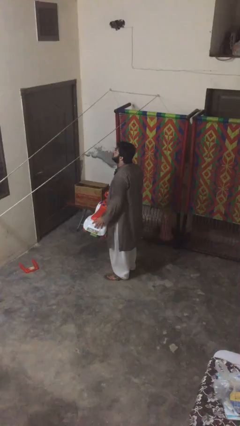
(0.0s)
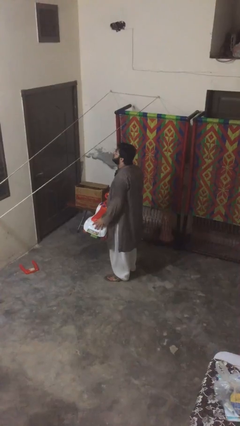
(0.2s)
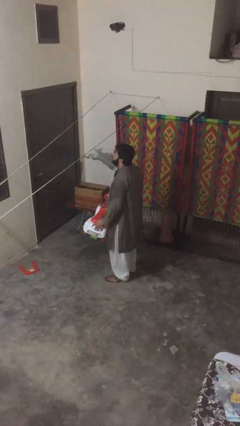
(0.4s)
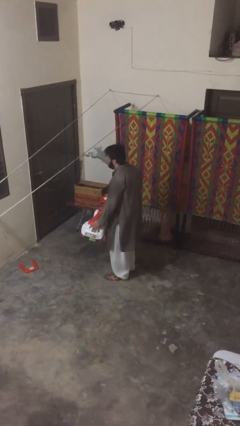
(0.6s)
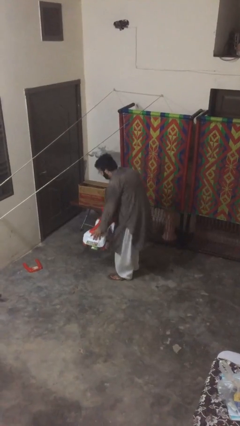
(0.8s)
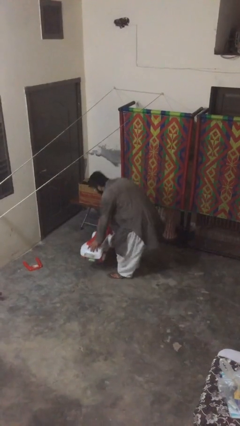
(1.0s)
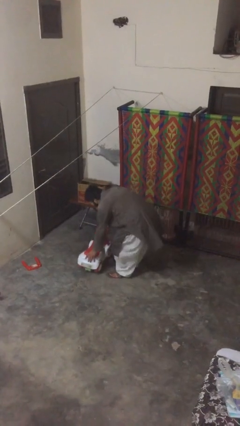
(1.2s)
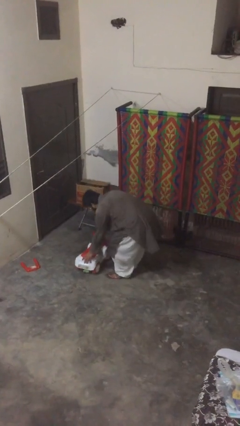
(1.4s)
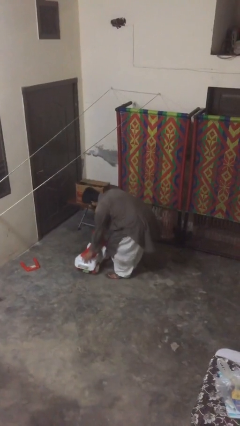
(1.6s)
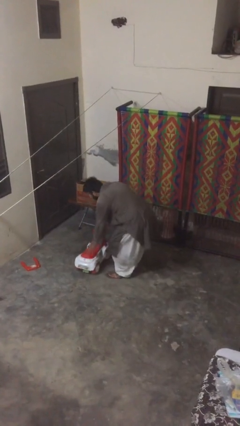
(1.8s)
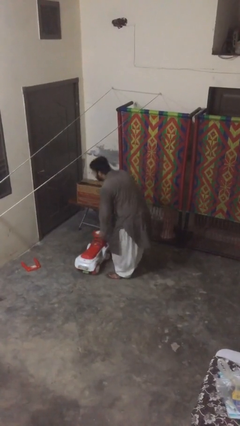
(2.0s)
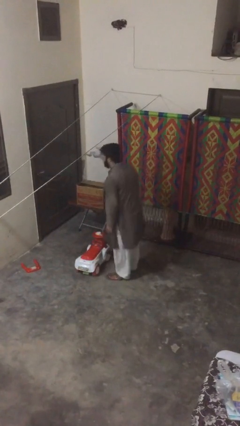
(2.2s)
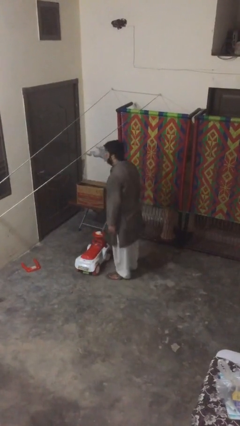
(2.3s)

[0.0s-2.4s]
person puts down object on floor

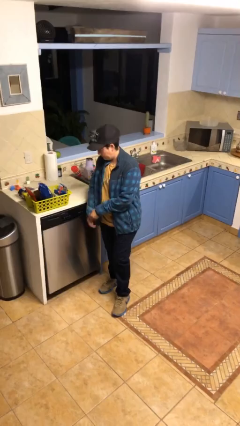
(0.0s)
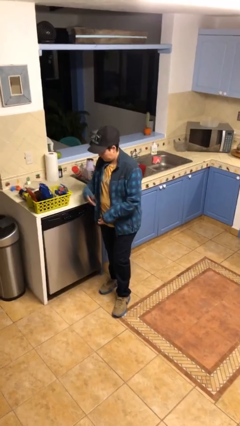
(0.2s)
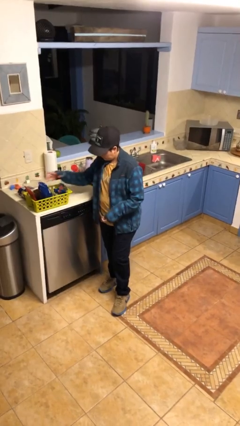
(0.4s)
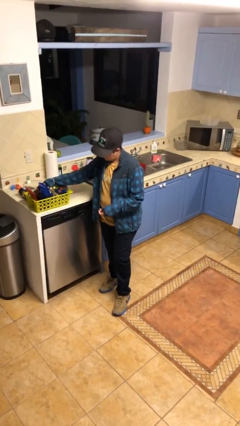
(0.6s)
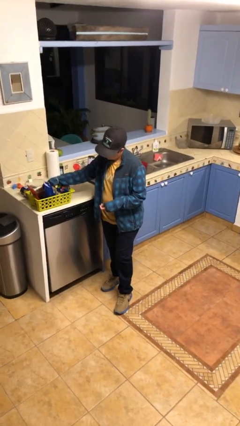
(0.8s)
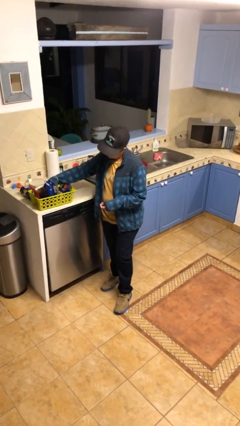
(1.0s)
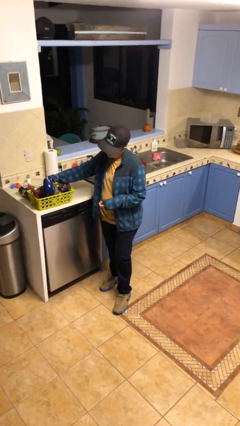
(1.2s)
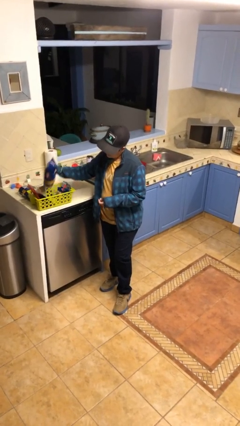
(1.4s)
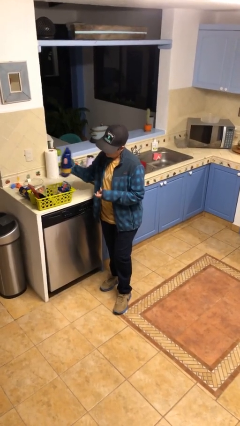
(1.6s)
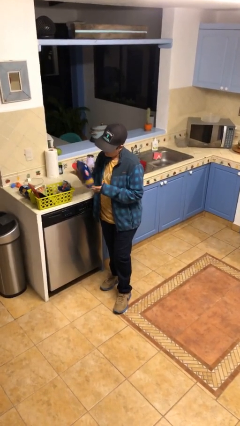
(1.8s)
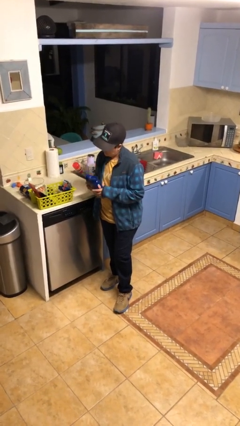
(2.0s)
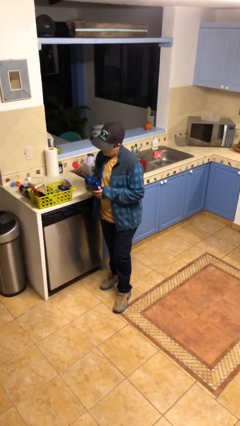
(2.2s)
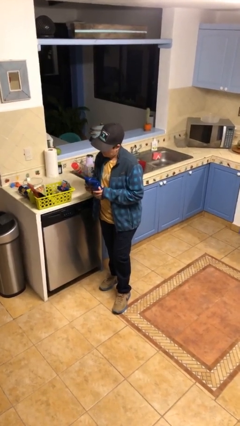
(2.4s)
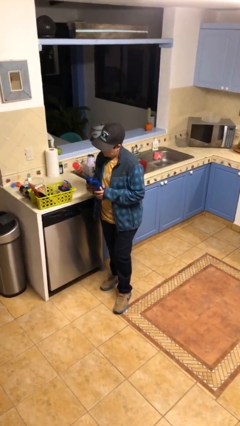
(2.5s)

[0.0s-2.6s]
person takes object from basket

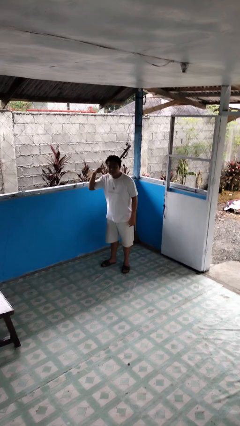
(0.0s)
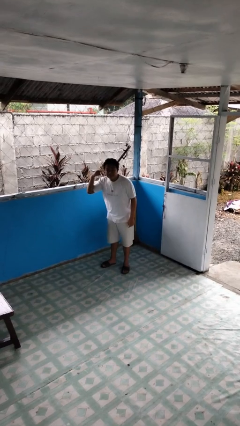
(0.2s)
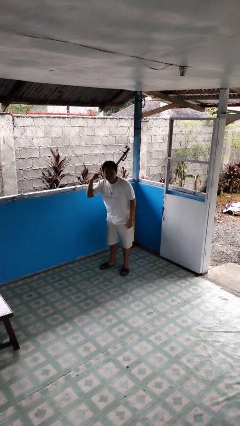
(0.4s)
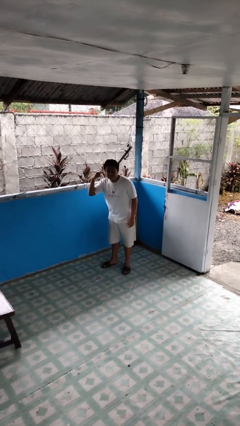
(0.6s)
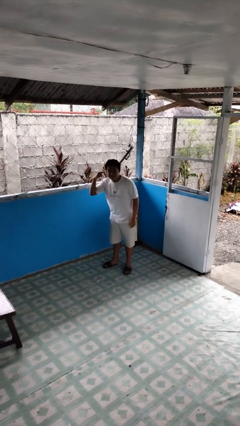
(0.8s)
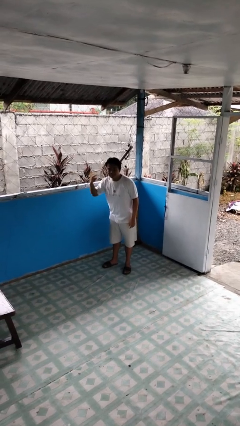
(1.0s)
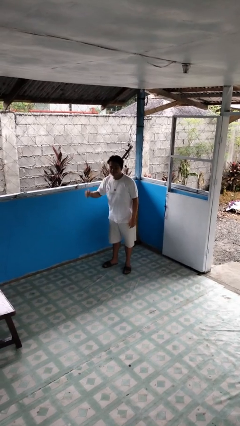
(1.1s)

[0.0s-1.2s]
person gestures listen closely

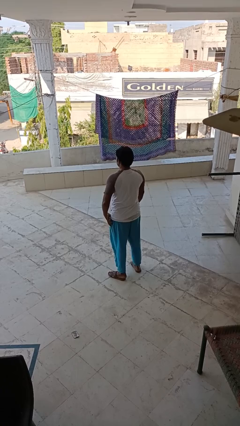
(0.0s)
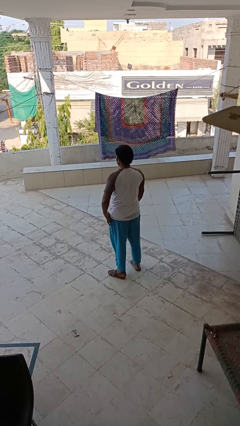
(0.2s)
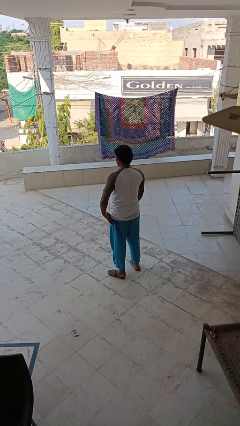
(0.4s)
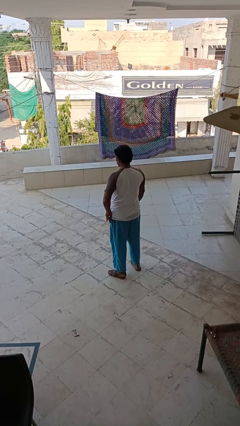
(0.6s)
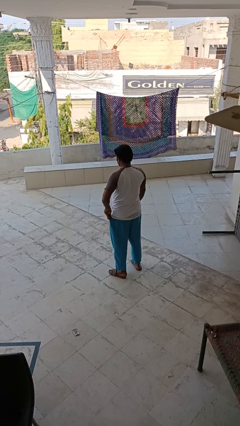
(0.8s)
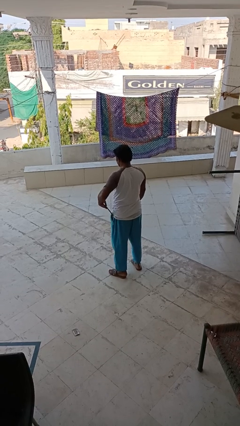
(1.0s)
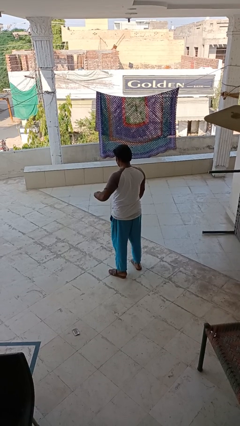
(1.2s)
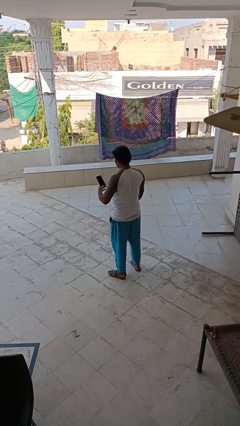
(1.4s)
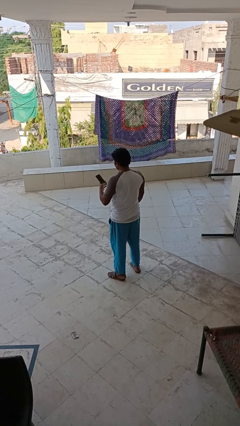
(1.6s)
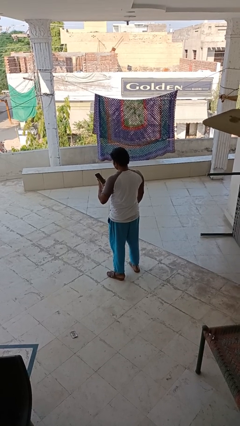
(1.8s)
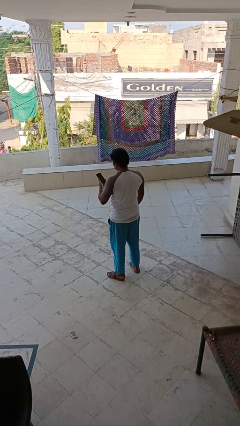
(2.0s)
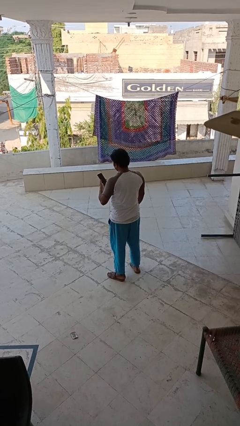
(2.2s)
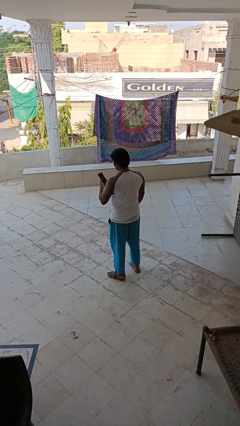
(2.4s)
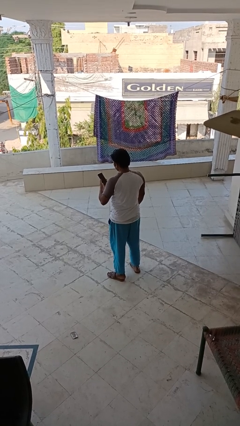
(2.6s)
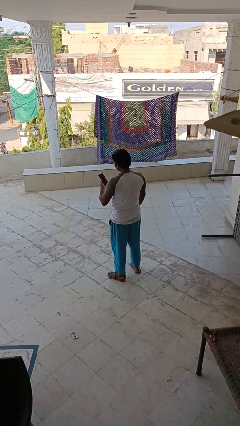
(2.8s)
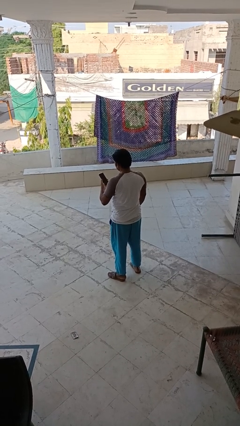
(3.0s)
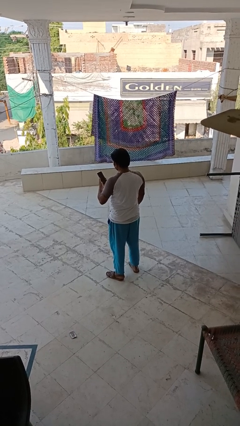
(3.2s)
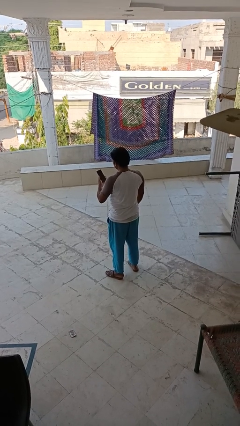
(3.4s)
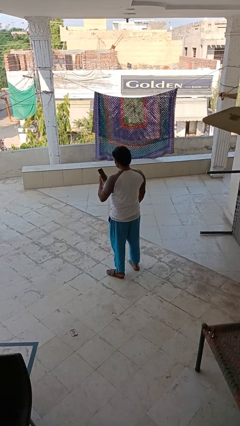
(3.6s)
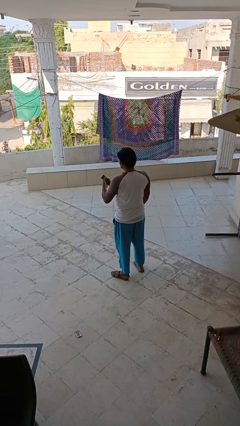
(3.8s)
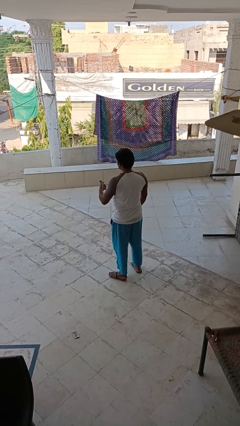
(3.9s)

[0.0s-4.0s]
person takes phone from pocket

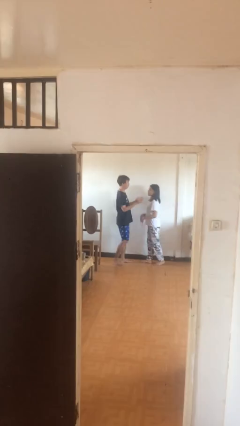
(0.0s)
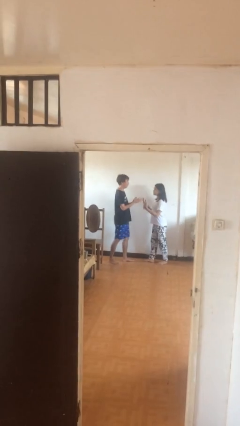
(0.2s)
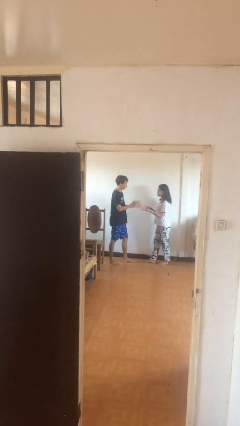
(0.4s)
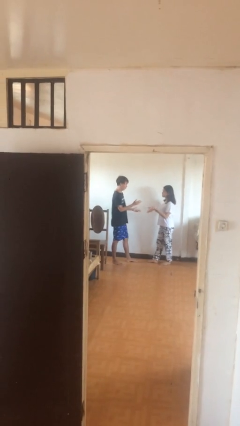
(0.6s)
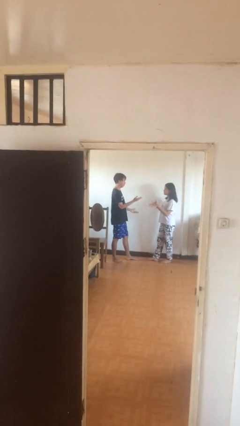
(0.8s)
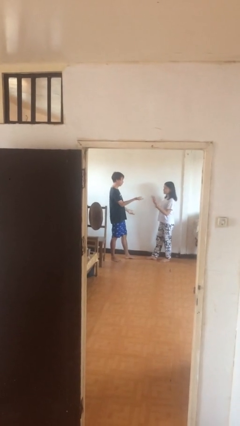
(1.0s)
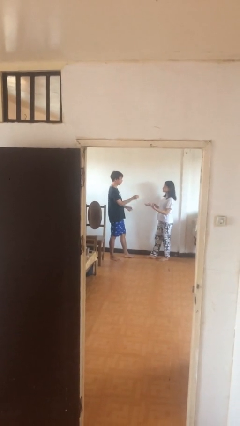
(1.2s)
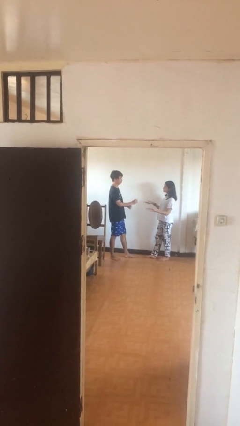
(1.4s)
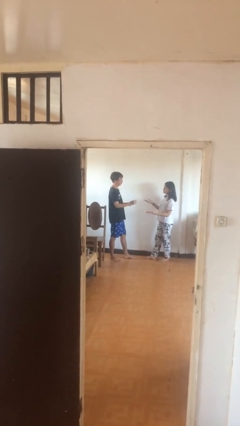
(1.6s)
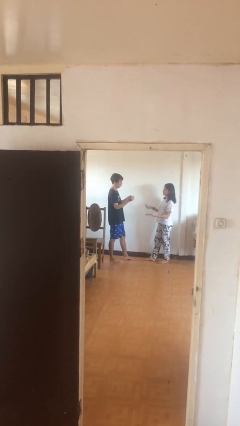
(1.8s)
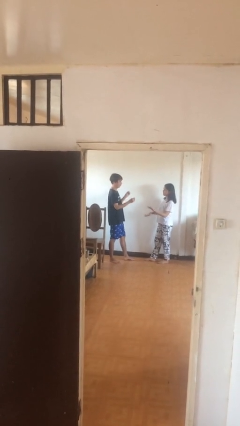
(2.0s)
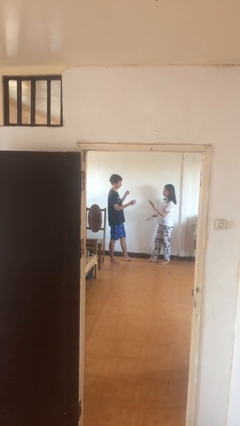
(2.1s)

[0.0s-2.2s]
person talks to person

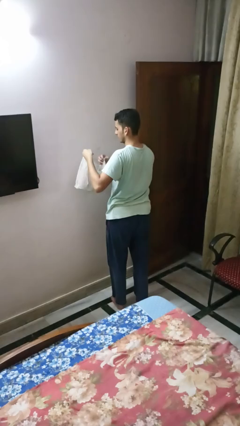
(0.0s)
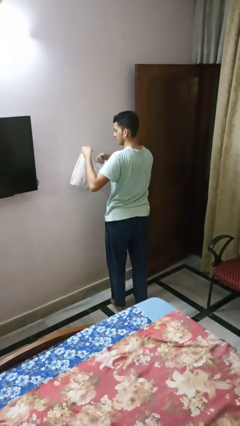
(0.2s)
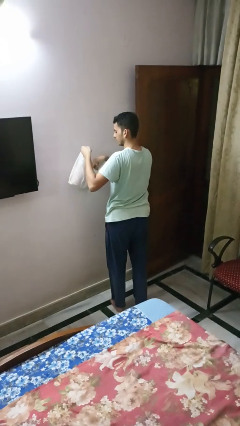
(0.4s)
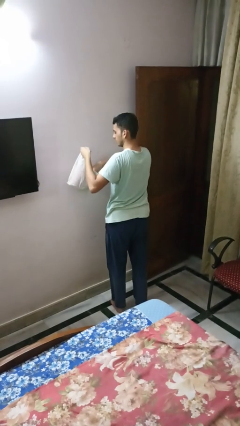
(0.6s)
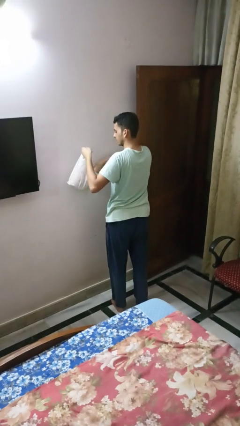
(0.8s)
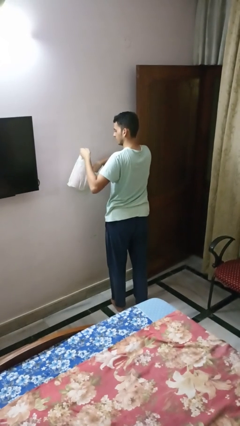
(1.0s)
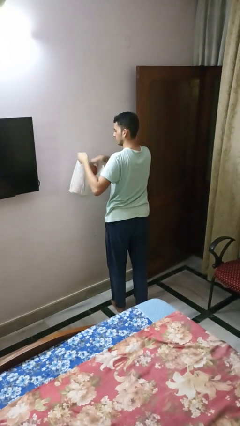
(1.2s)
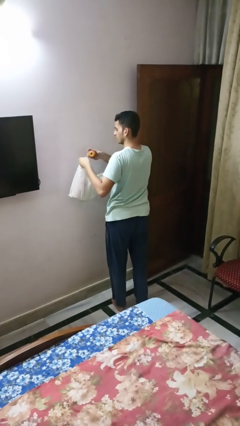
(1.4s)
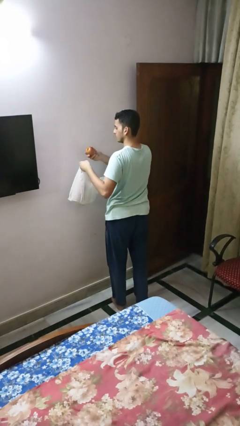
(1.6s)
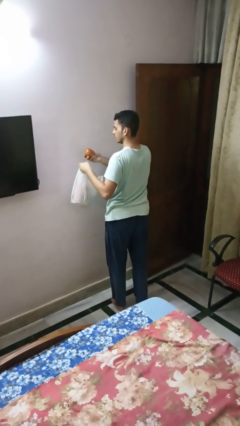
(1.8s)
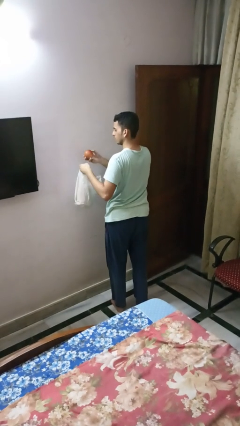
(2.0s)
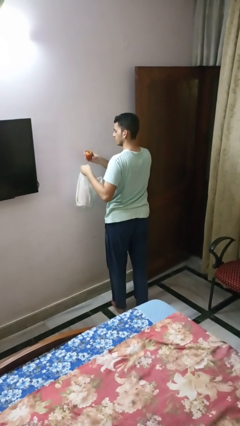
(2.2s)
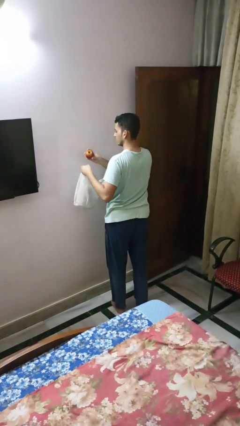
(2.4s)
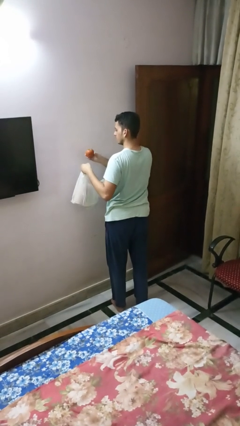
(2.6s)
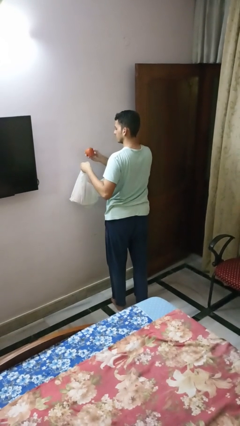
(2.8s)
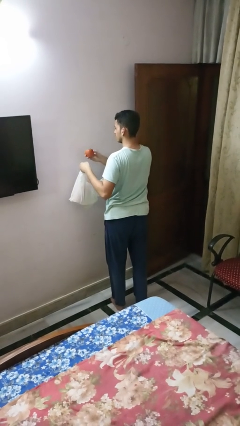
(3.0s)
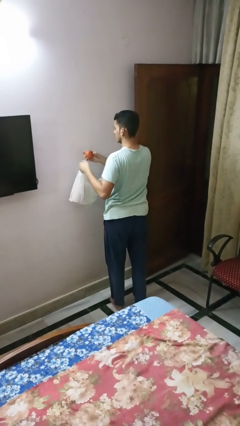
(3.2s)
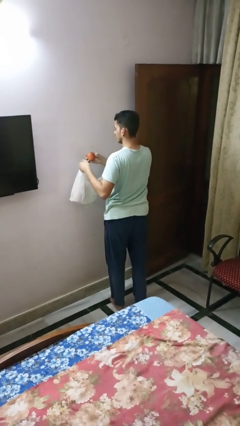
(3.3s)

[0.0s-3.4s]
person takes object from bag

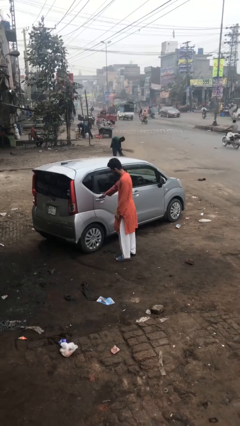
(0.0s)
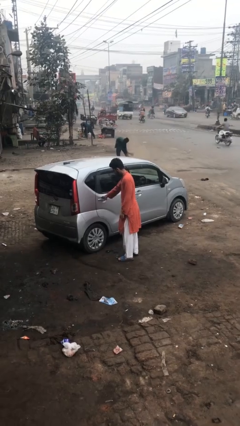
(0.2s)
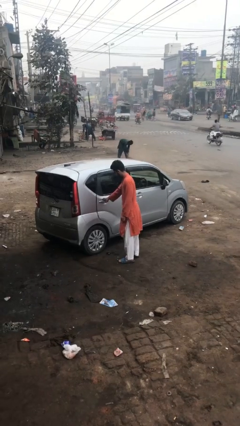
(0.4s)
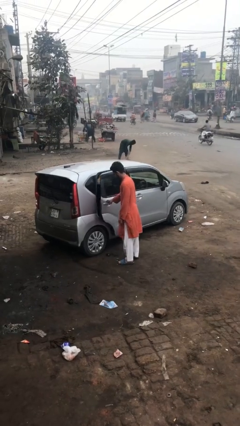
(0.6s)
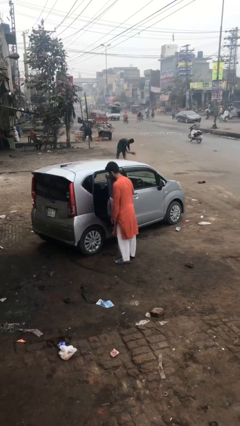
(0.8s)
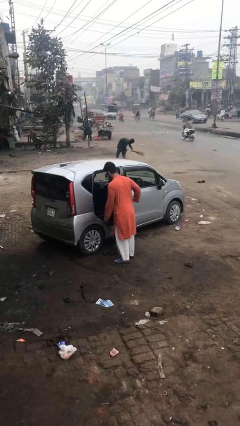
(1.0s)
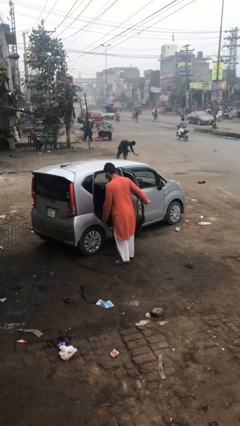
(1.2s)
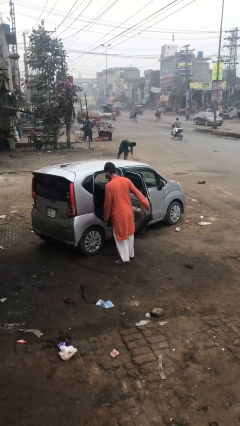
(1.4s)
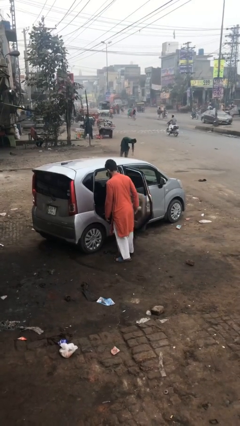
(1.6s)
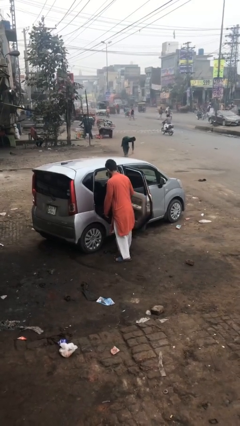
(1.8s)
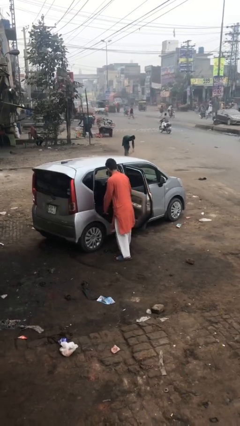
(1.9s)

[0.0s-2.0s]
person opens car door
